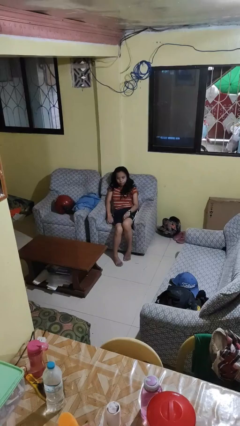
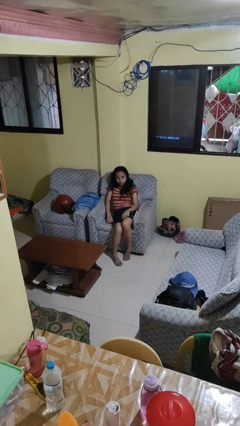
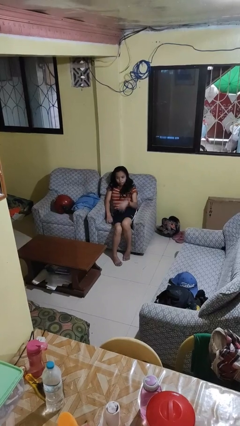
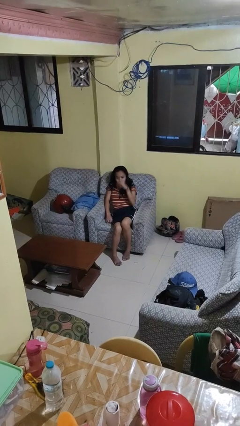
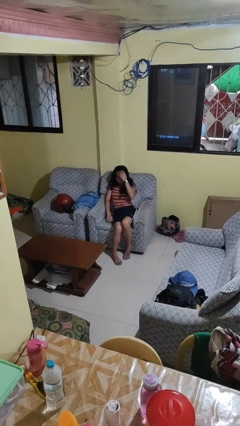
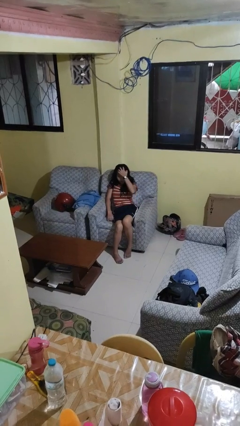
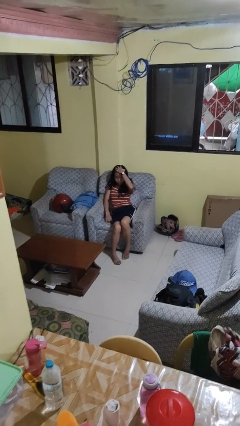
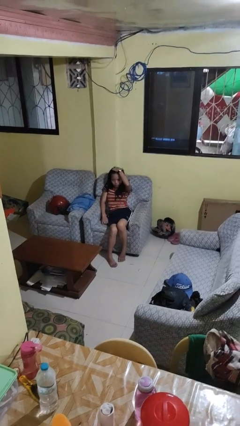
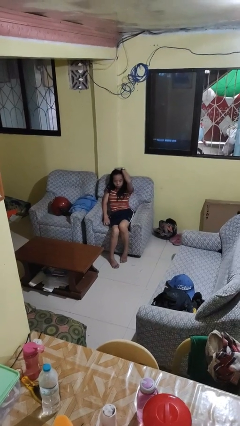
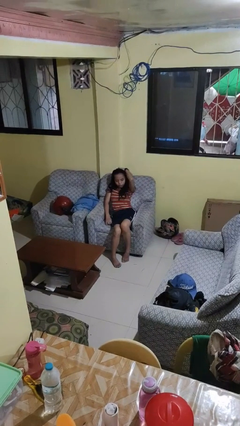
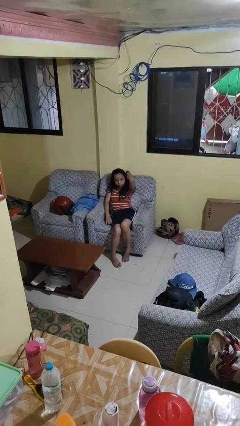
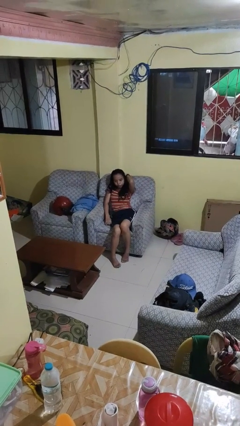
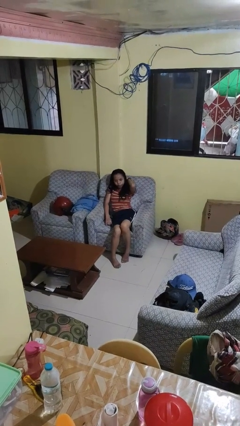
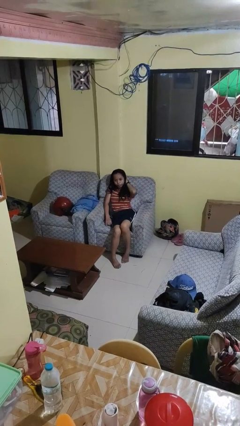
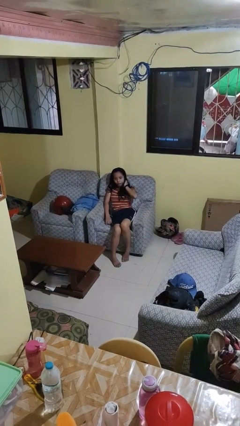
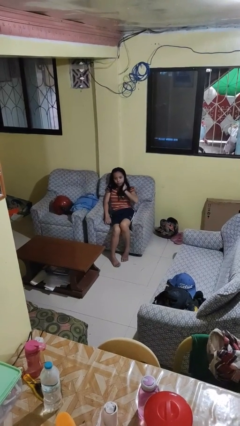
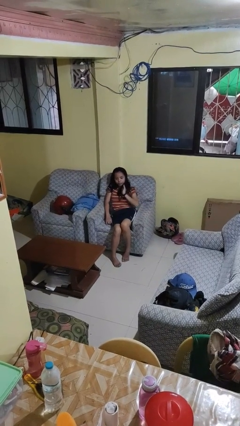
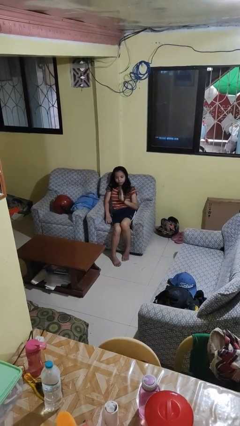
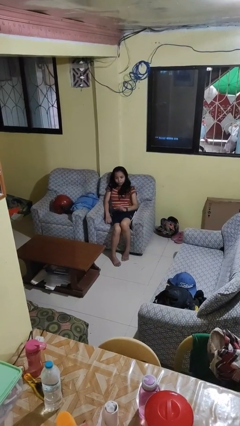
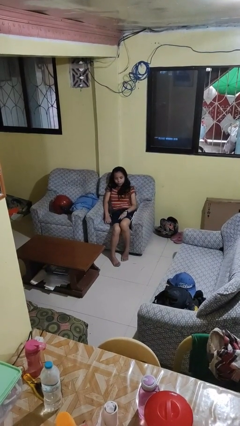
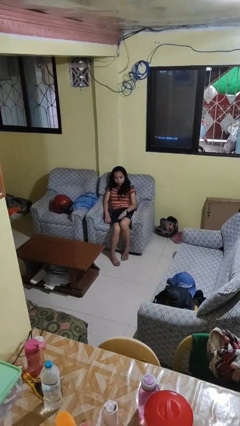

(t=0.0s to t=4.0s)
person strokes hair

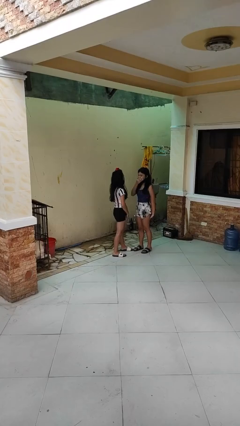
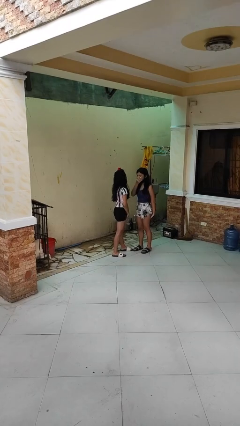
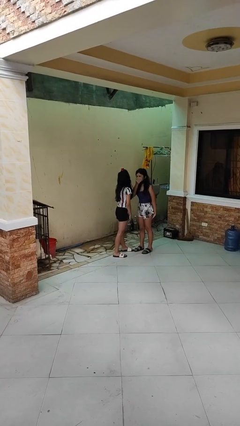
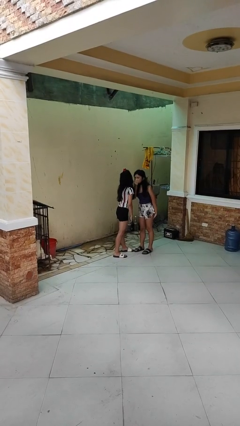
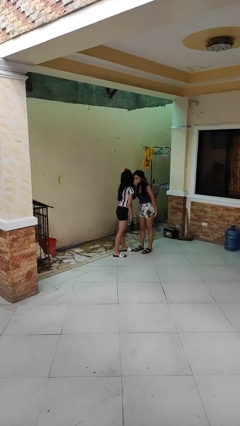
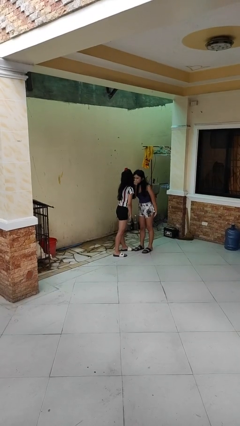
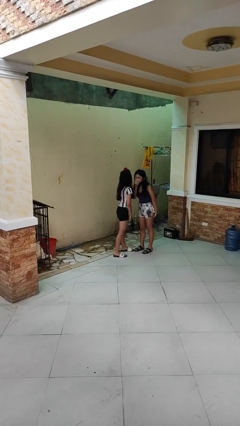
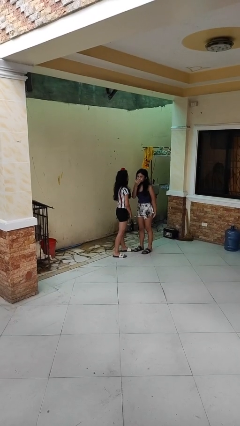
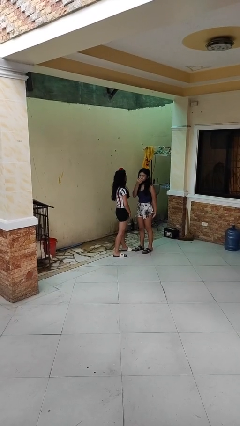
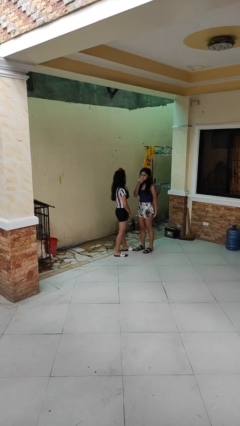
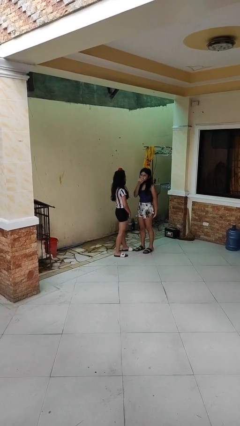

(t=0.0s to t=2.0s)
person kisses cheek of person

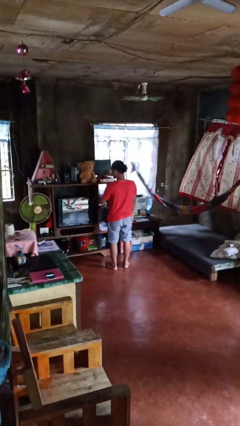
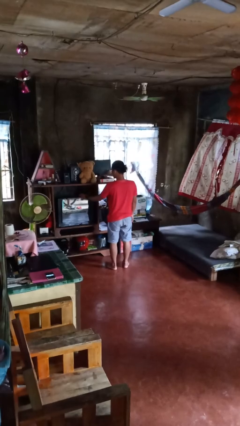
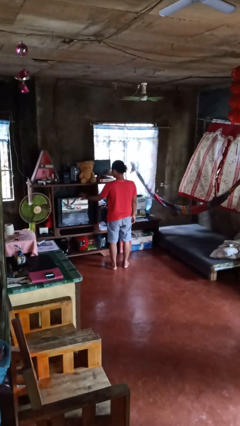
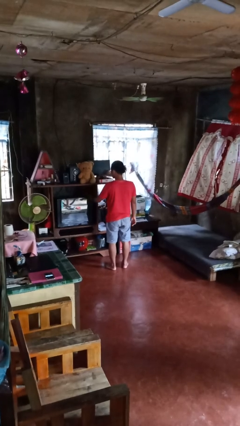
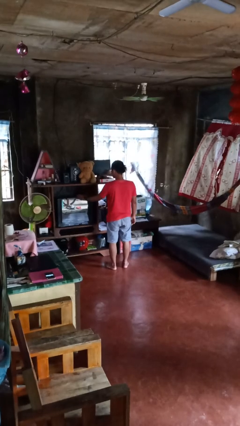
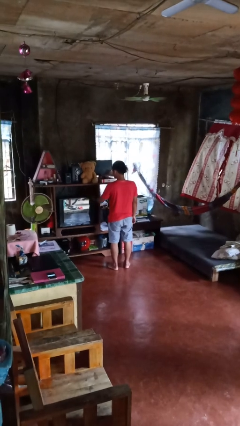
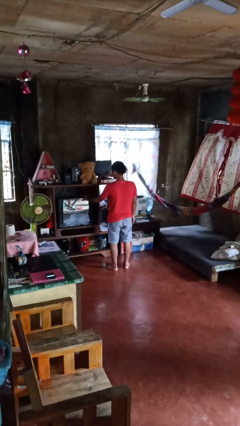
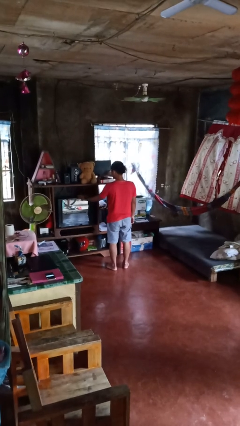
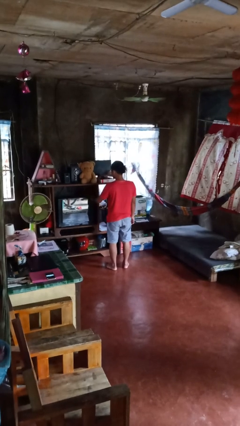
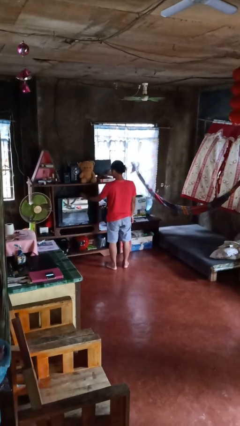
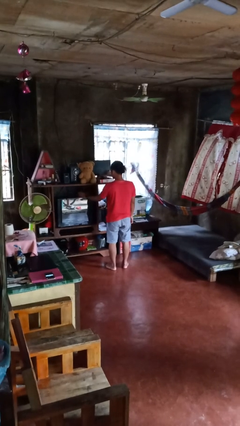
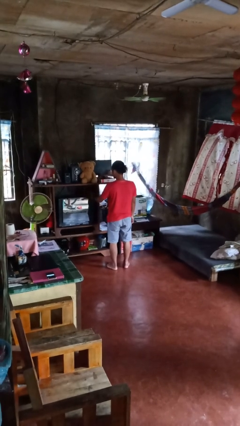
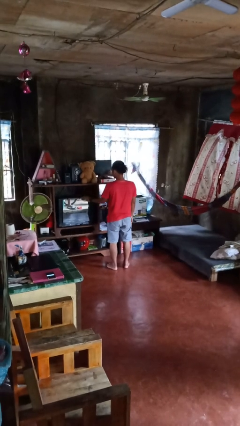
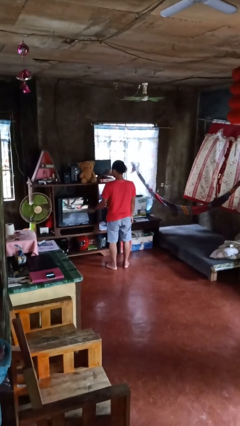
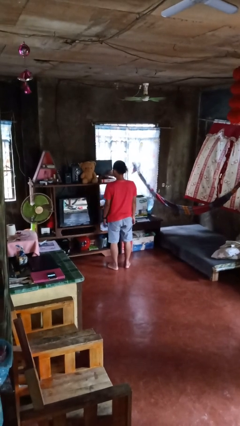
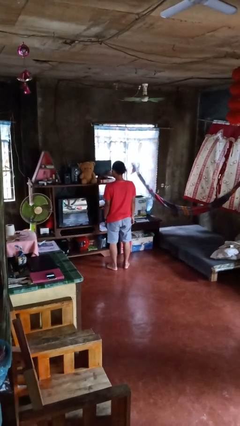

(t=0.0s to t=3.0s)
person waves hand over object

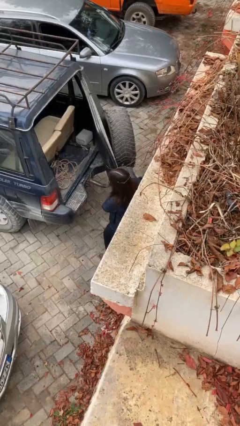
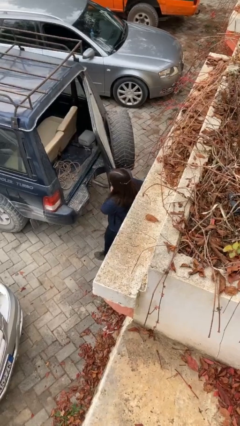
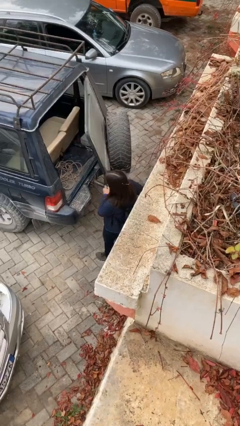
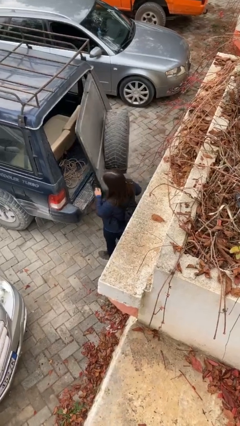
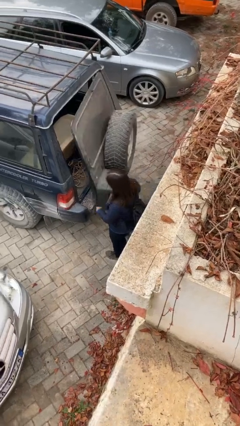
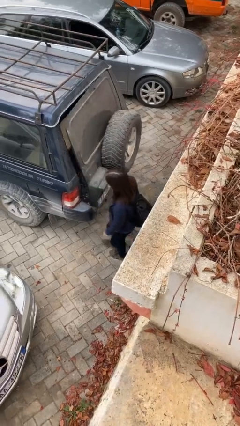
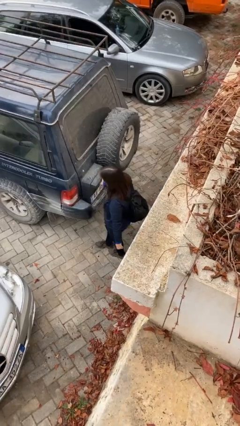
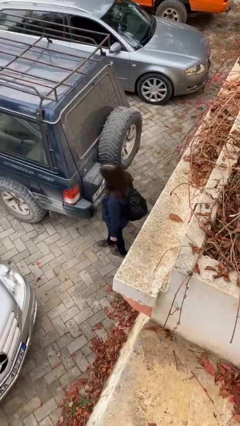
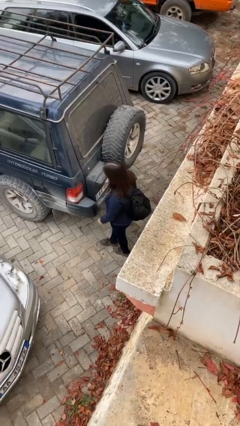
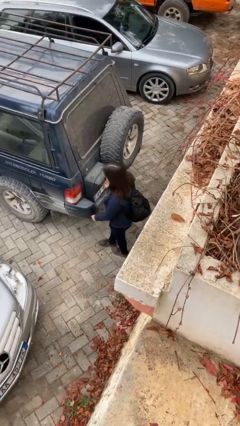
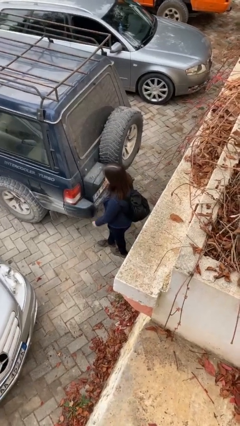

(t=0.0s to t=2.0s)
person closes car trunk

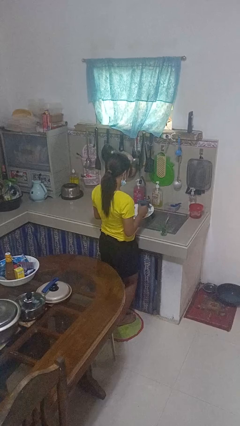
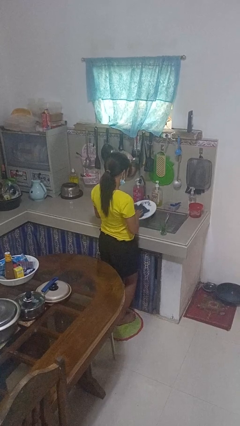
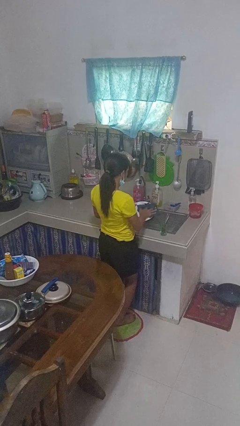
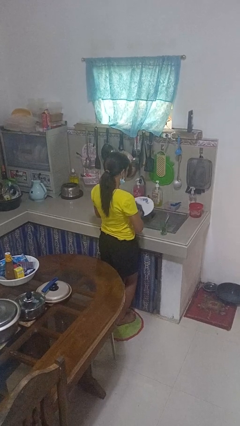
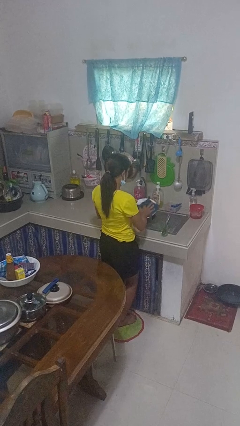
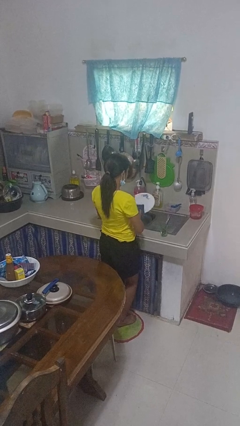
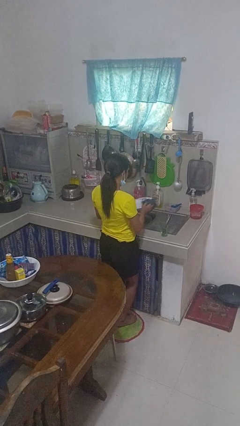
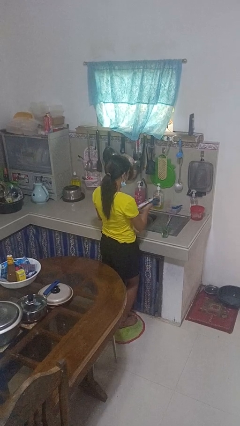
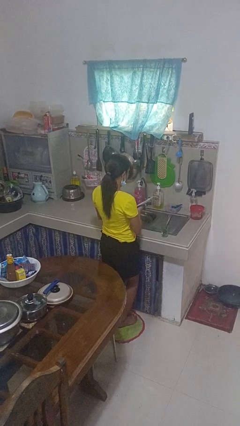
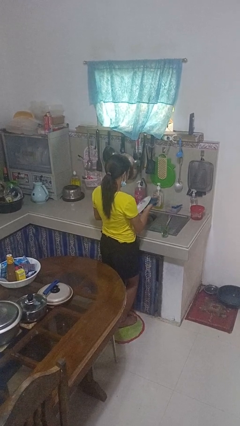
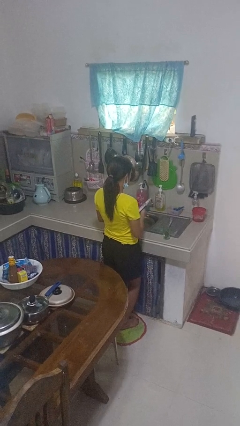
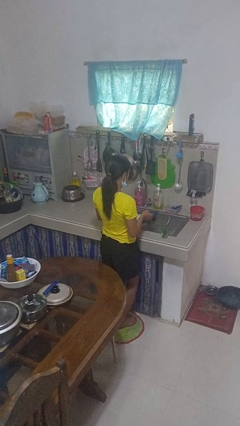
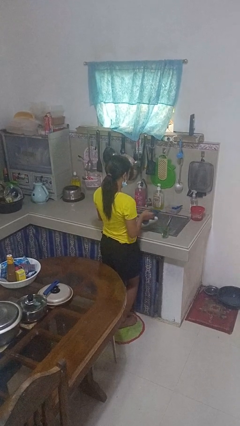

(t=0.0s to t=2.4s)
person dries dish

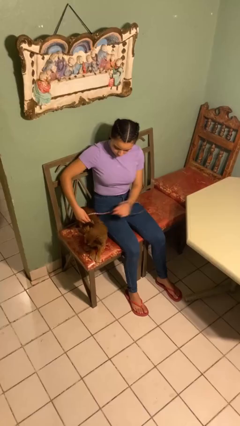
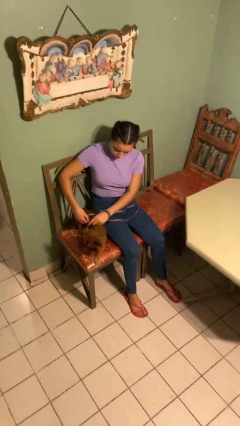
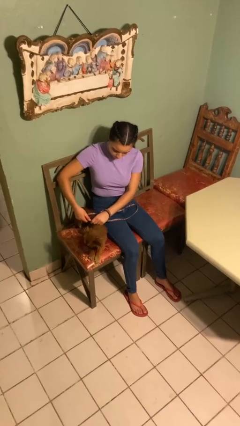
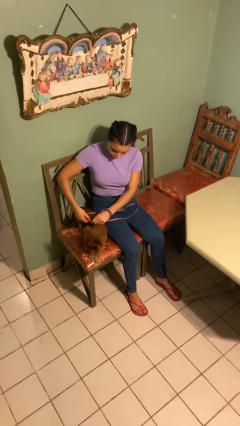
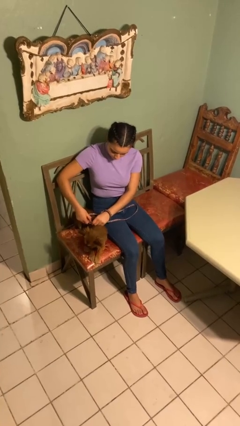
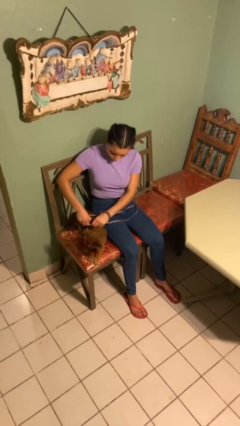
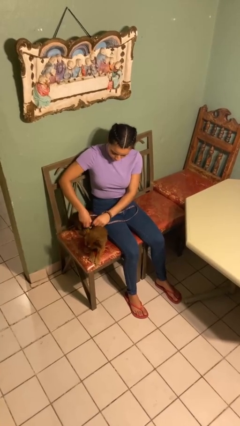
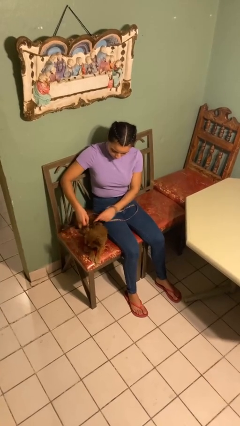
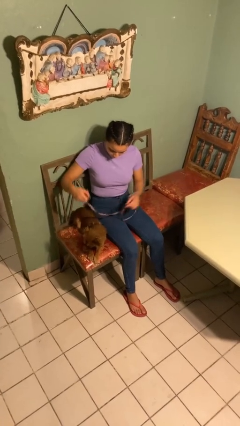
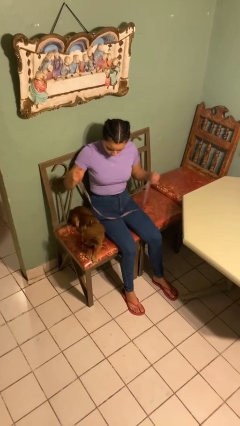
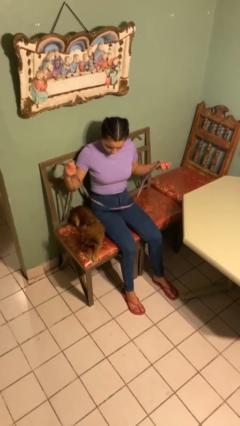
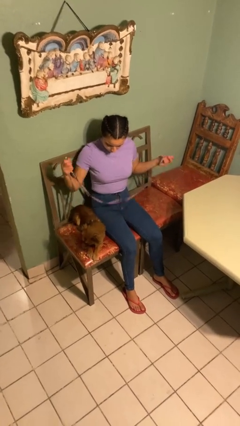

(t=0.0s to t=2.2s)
person unattaches leash from dog

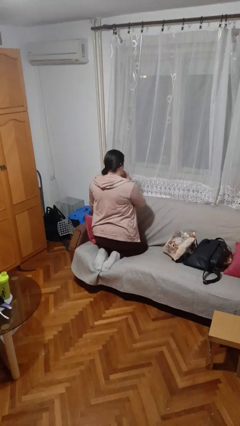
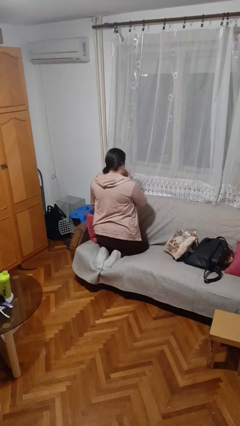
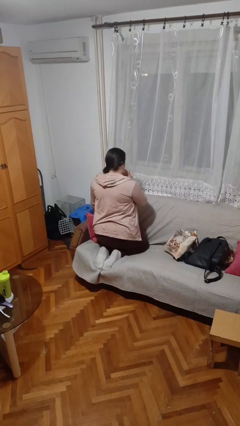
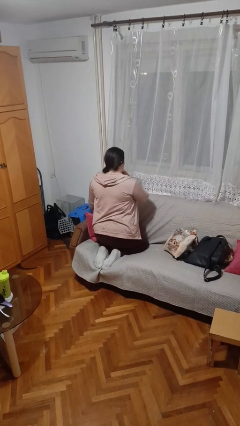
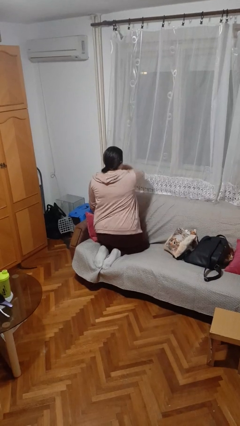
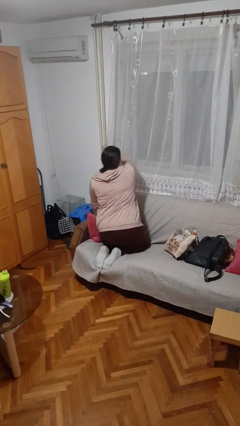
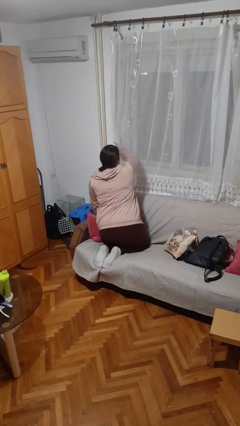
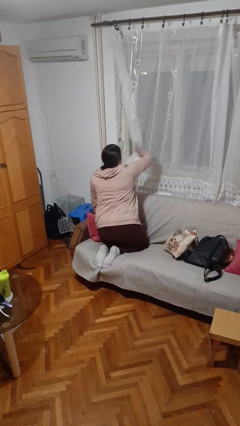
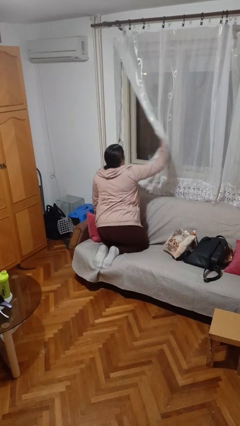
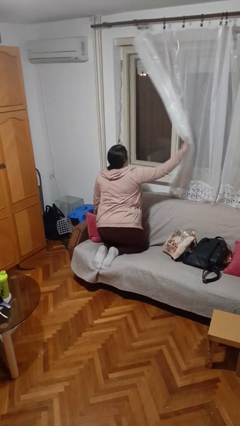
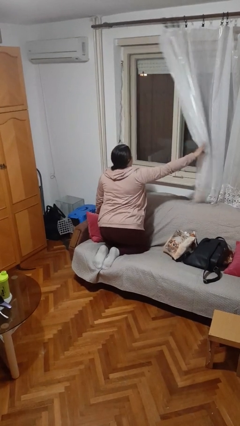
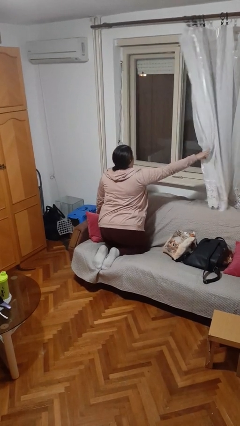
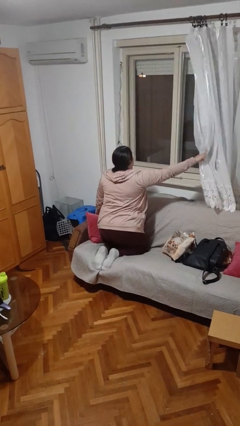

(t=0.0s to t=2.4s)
person opens curtains
